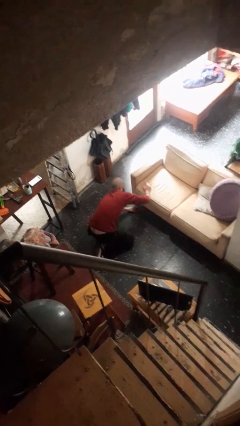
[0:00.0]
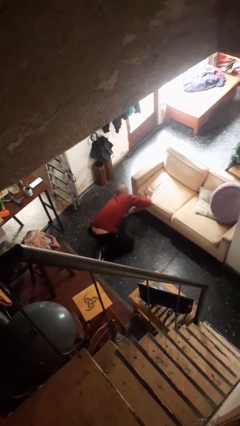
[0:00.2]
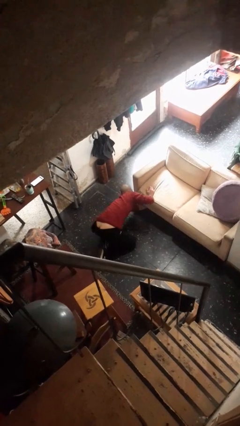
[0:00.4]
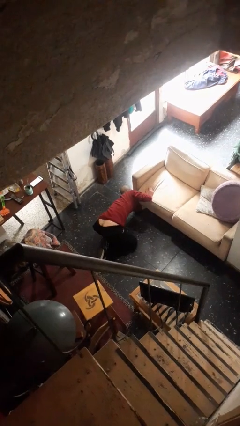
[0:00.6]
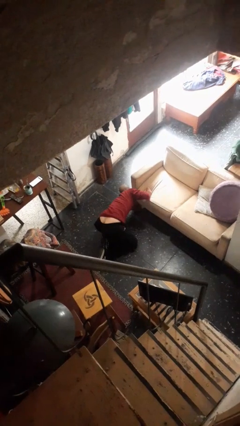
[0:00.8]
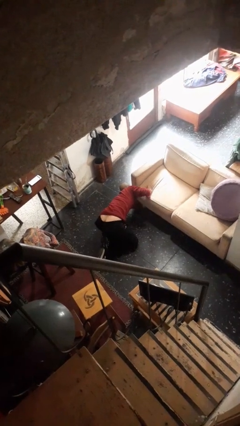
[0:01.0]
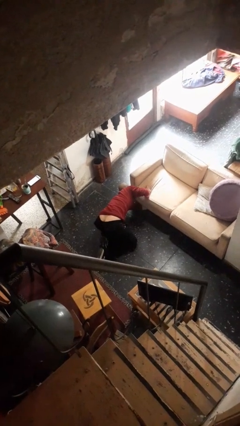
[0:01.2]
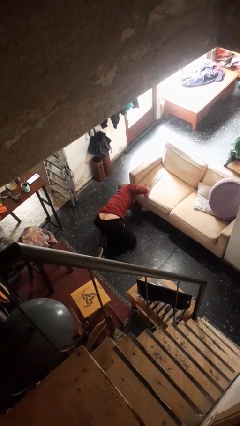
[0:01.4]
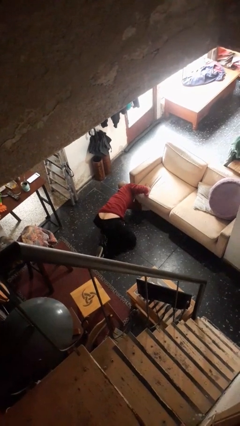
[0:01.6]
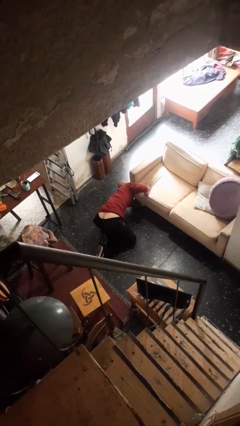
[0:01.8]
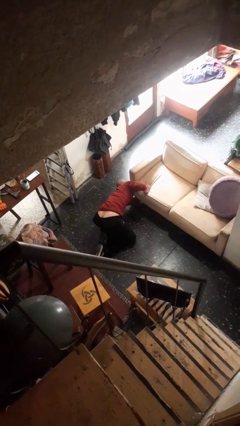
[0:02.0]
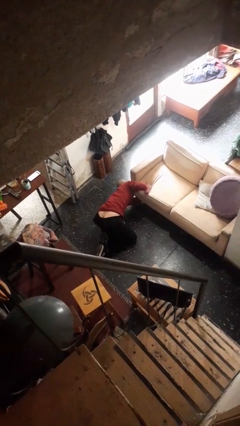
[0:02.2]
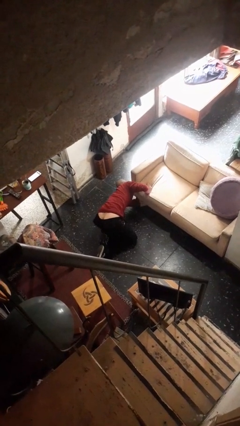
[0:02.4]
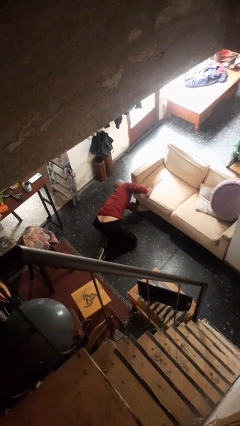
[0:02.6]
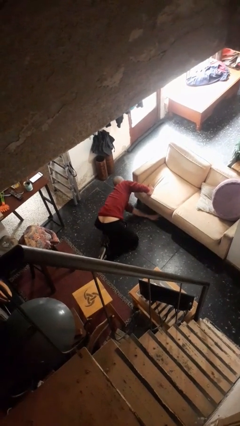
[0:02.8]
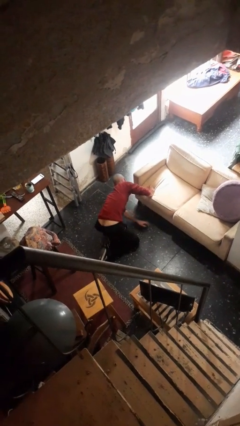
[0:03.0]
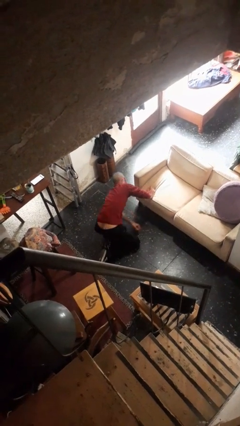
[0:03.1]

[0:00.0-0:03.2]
person searches under couch

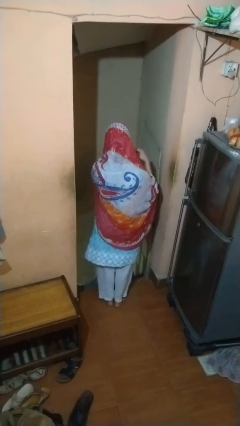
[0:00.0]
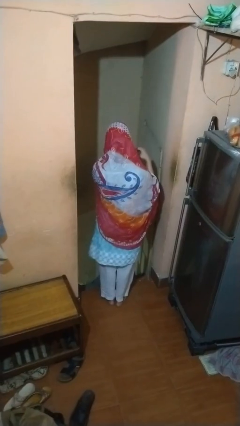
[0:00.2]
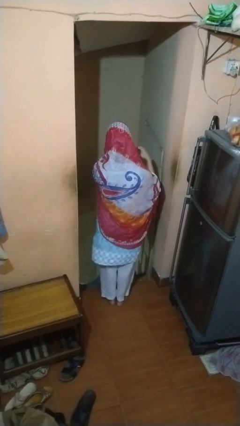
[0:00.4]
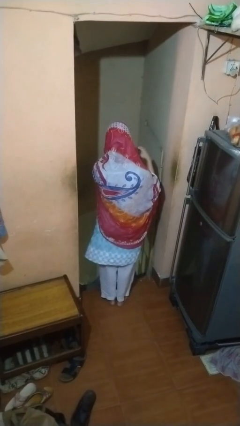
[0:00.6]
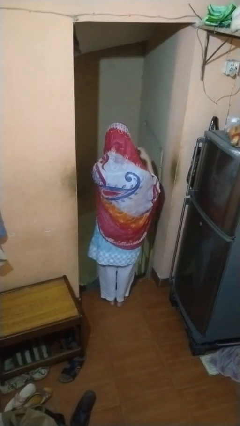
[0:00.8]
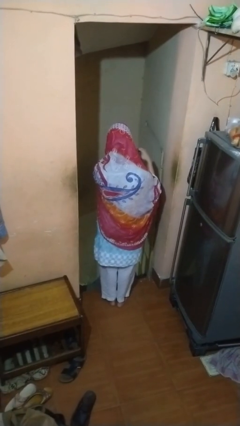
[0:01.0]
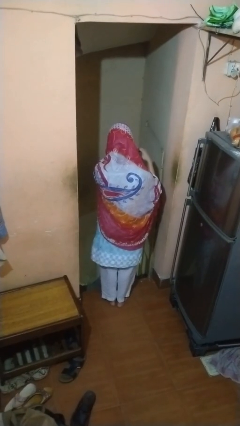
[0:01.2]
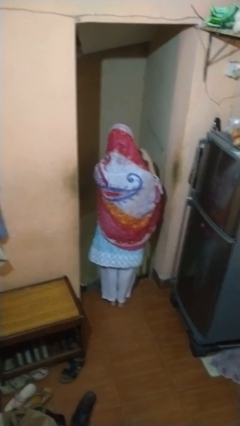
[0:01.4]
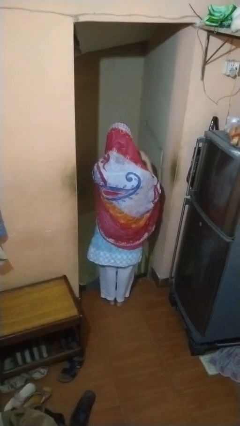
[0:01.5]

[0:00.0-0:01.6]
person gestures heart

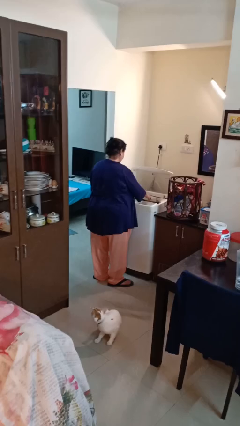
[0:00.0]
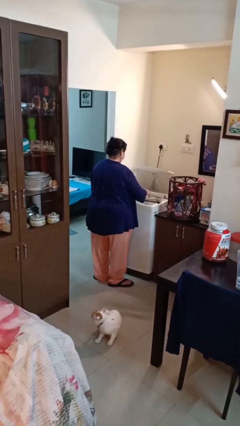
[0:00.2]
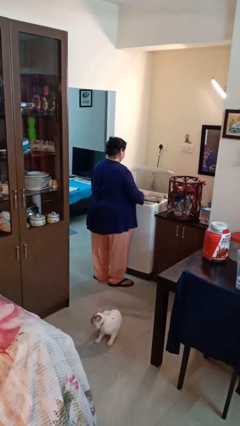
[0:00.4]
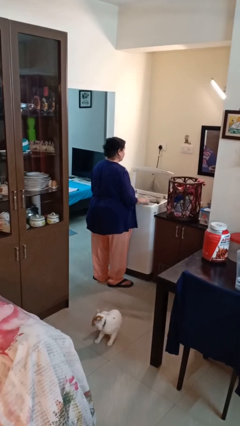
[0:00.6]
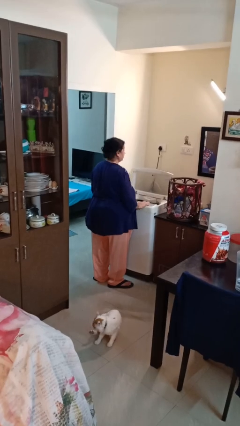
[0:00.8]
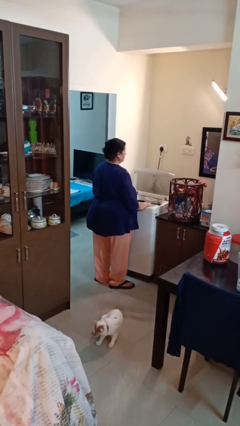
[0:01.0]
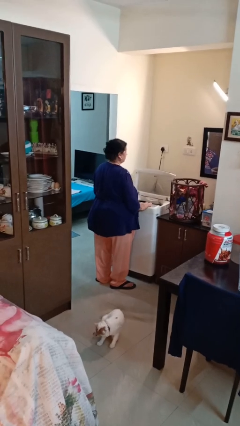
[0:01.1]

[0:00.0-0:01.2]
person loads clotheswasher

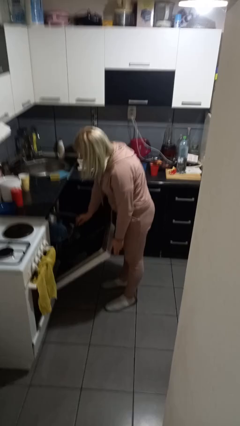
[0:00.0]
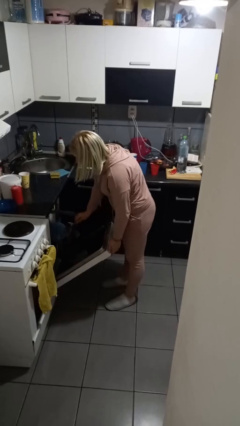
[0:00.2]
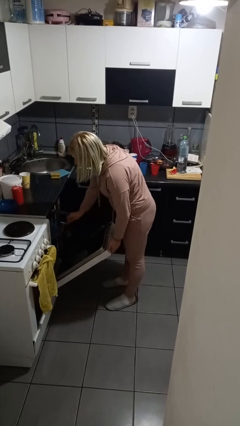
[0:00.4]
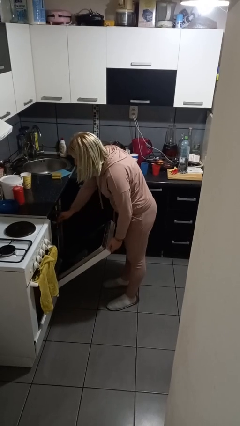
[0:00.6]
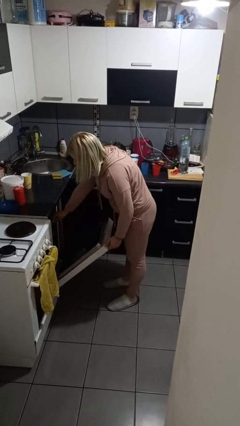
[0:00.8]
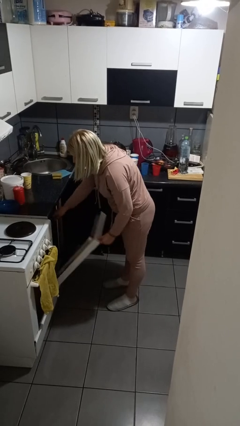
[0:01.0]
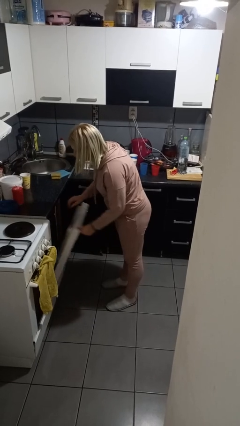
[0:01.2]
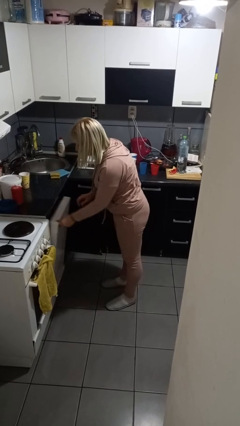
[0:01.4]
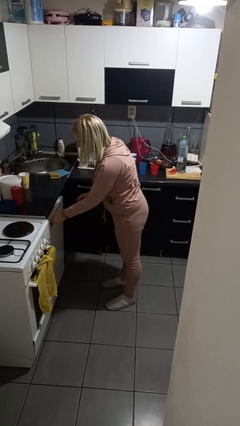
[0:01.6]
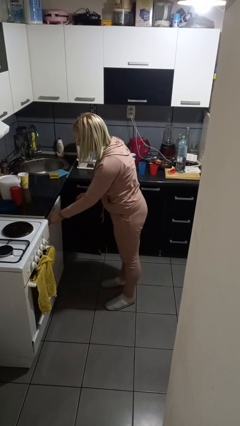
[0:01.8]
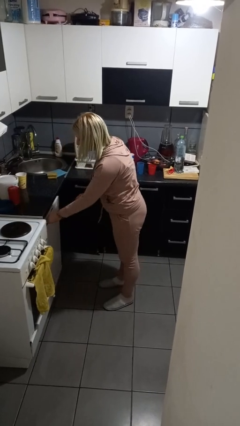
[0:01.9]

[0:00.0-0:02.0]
person closes dishwasher

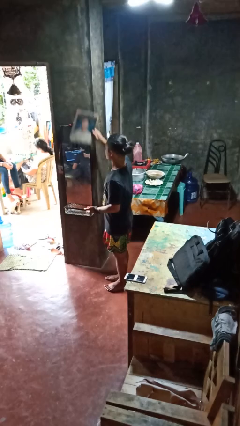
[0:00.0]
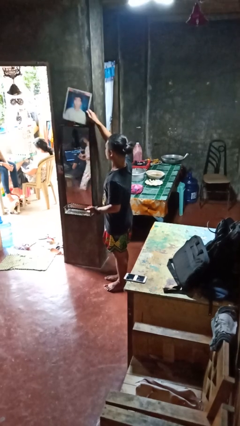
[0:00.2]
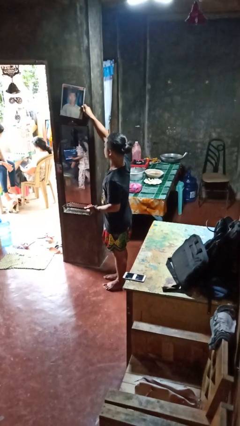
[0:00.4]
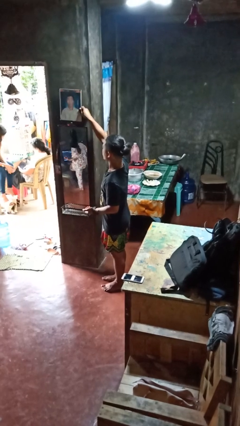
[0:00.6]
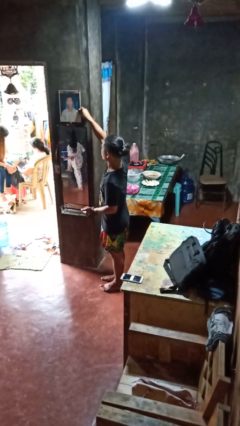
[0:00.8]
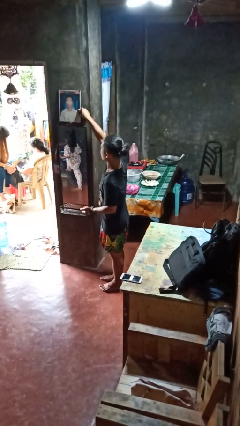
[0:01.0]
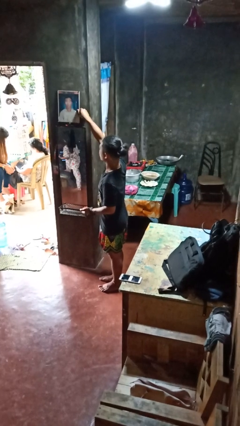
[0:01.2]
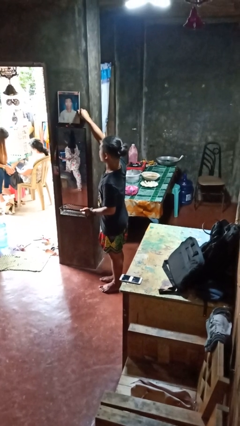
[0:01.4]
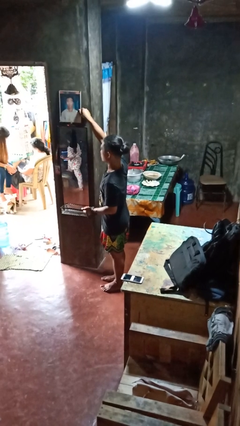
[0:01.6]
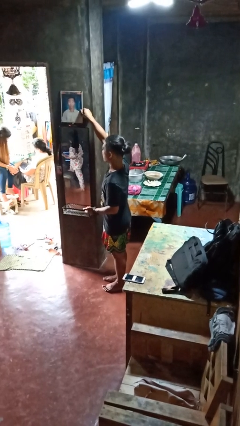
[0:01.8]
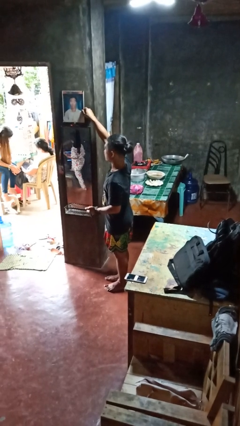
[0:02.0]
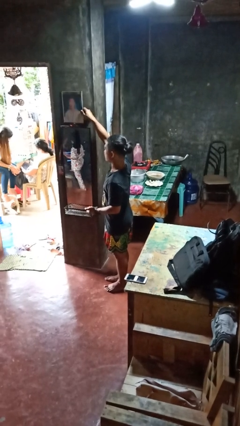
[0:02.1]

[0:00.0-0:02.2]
person puts up picture frame

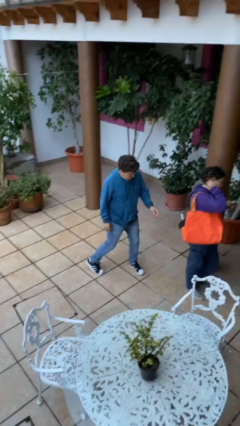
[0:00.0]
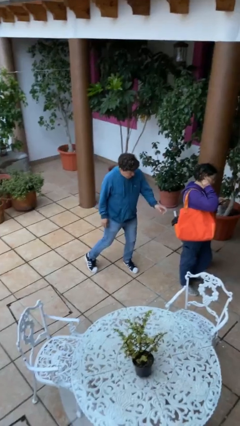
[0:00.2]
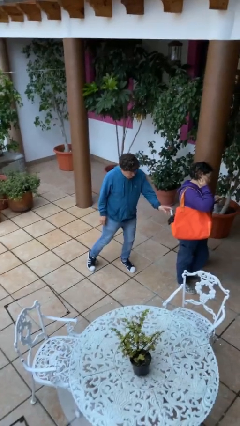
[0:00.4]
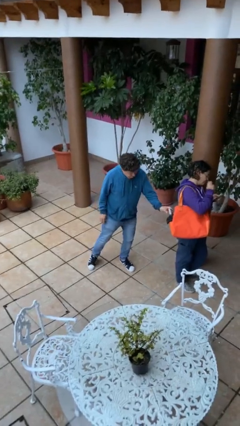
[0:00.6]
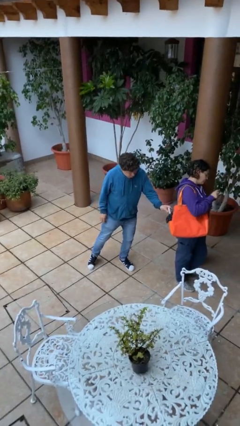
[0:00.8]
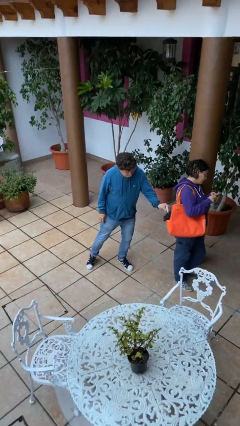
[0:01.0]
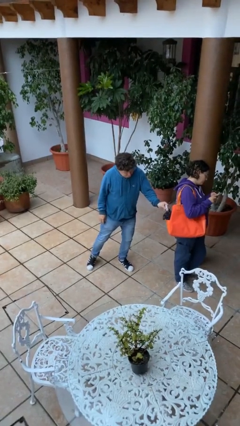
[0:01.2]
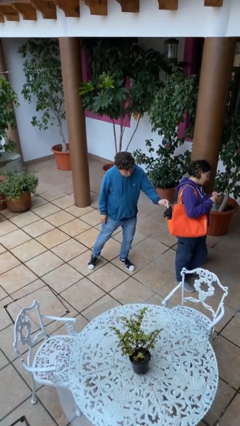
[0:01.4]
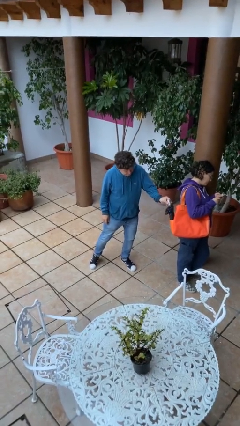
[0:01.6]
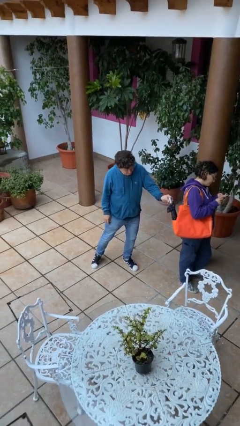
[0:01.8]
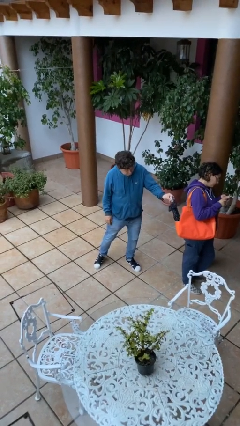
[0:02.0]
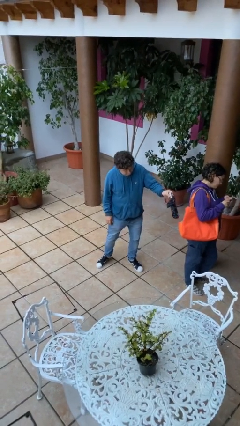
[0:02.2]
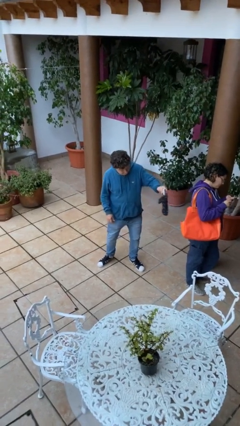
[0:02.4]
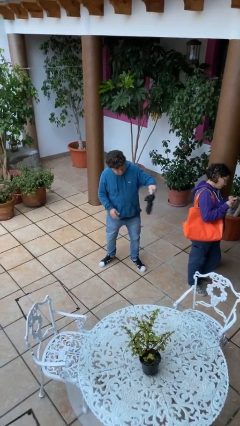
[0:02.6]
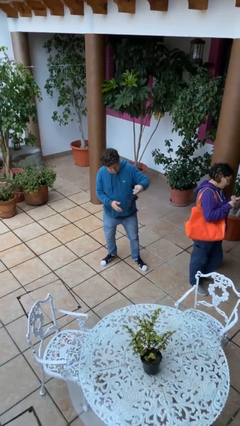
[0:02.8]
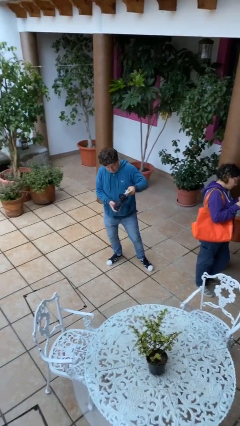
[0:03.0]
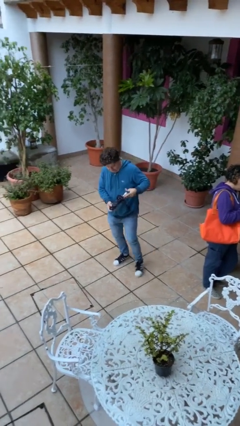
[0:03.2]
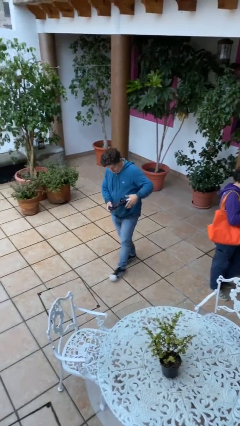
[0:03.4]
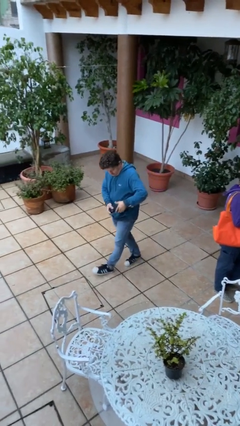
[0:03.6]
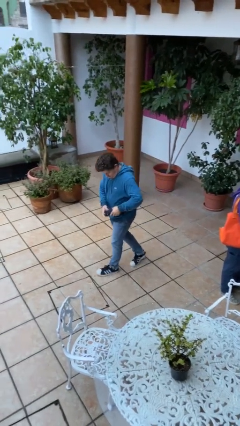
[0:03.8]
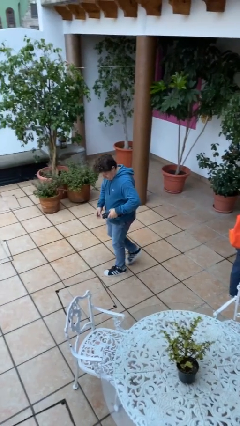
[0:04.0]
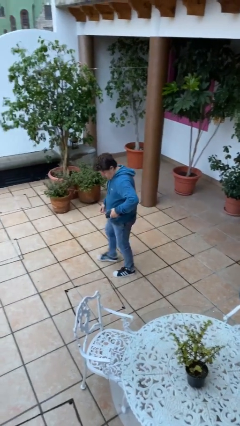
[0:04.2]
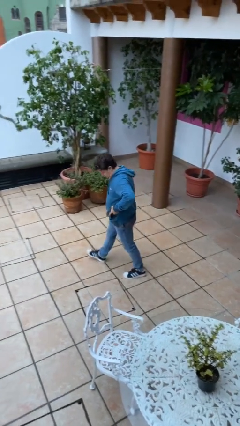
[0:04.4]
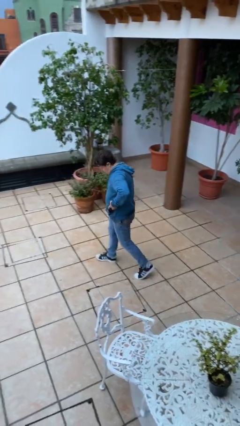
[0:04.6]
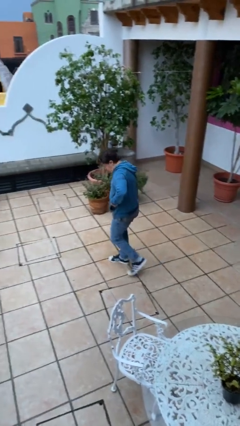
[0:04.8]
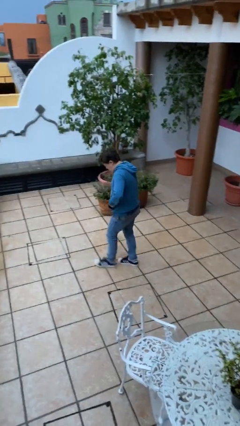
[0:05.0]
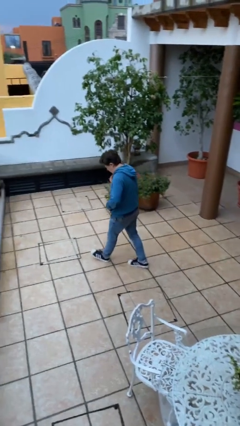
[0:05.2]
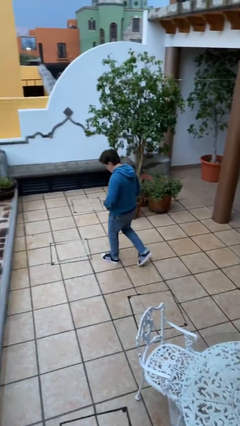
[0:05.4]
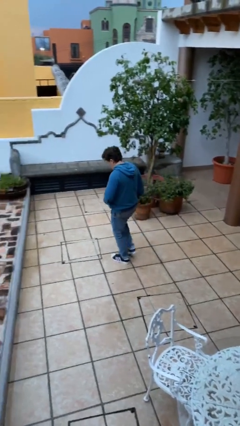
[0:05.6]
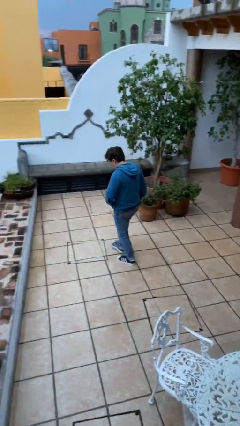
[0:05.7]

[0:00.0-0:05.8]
person steals object from person

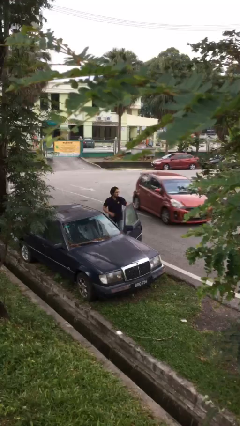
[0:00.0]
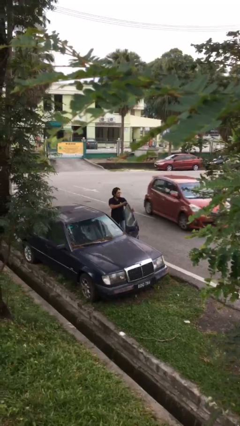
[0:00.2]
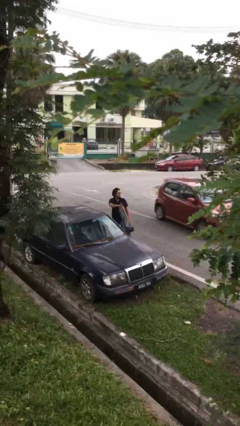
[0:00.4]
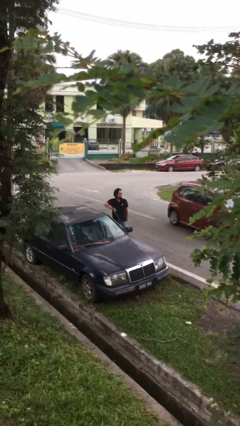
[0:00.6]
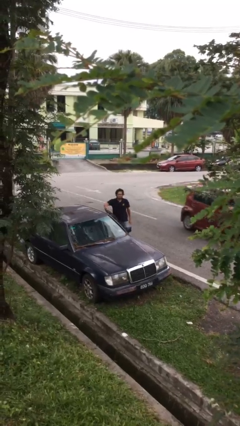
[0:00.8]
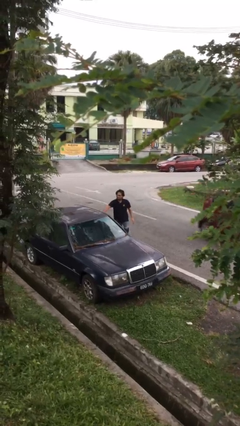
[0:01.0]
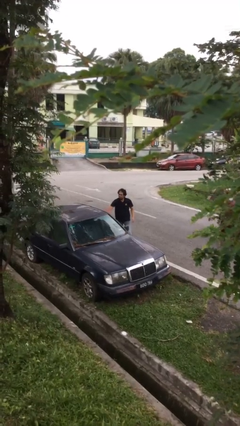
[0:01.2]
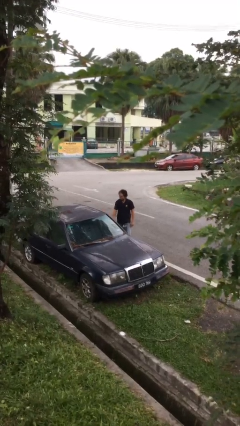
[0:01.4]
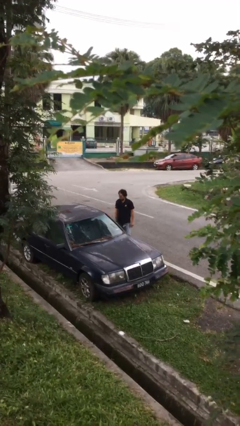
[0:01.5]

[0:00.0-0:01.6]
person closes car door
